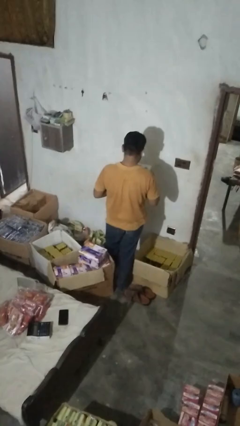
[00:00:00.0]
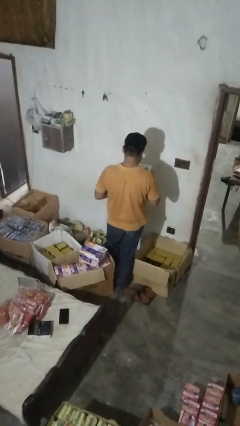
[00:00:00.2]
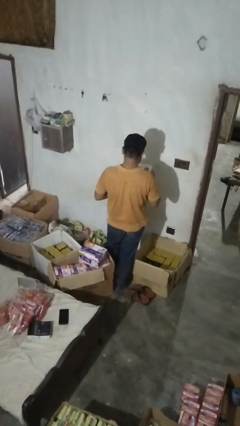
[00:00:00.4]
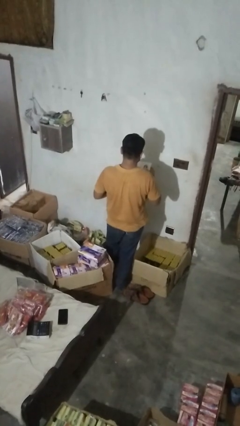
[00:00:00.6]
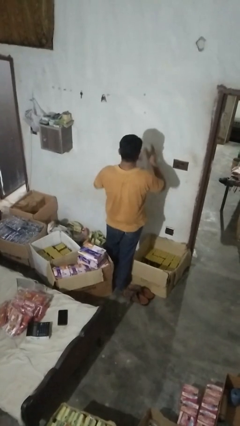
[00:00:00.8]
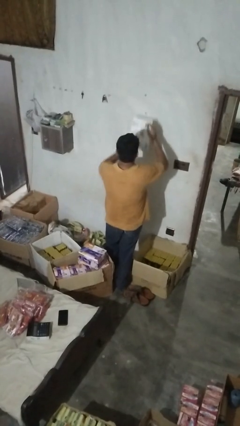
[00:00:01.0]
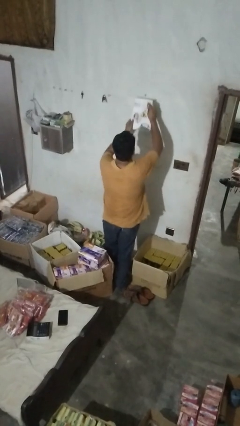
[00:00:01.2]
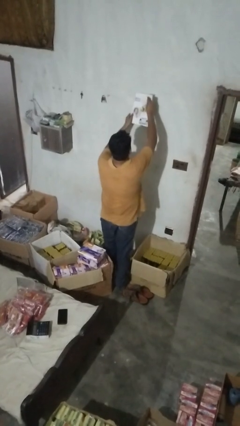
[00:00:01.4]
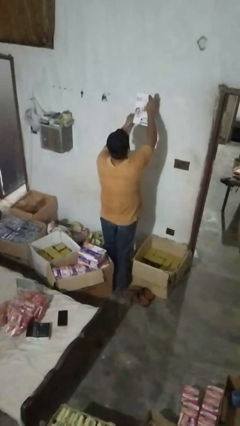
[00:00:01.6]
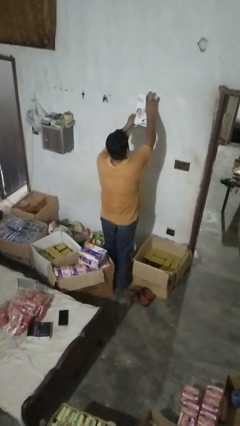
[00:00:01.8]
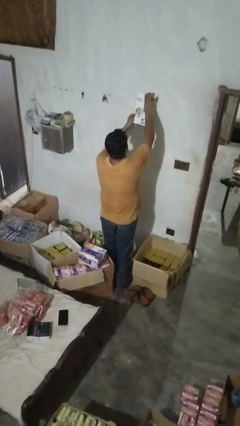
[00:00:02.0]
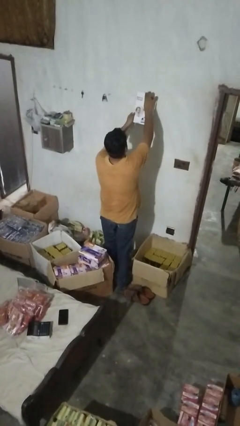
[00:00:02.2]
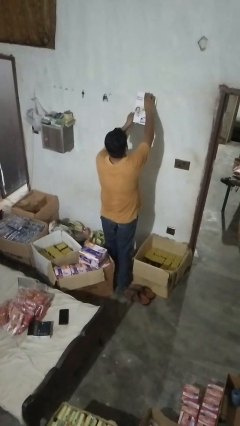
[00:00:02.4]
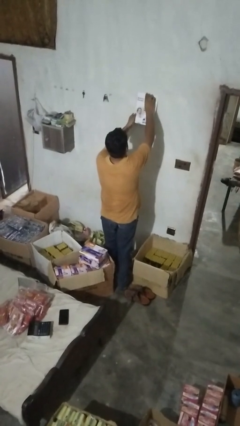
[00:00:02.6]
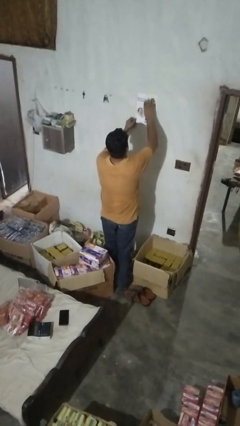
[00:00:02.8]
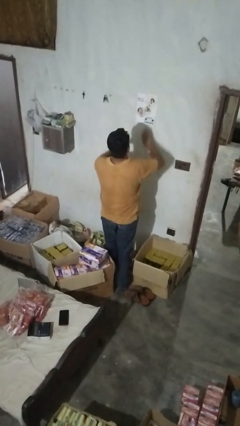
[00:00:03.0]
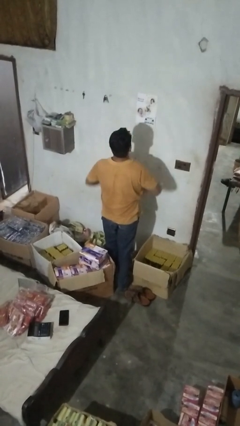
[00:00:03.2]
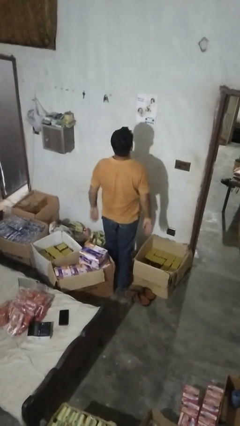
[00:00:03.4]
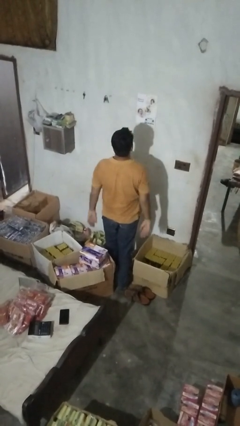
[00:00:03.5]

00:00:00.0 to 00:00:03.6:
person puts up picture frame

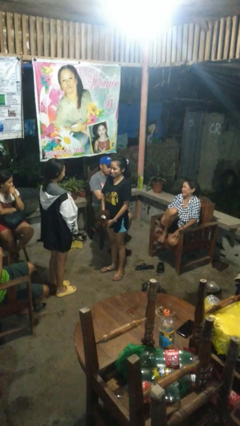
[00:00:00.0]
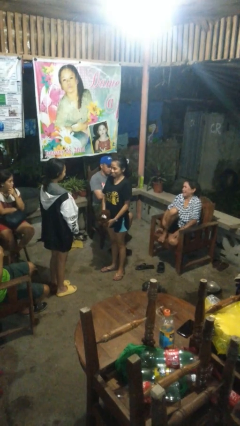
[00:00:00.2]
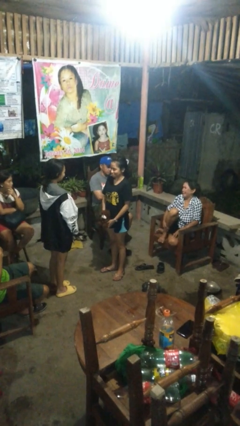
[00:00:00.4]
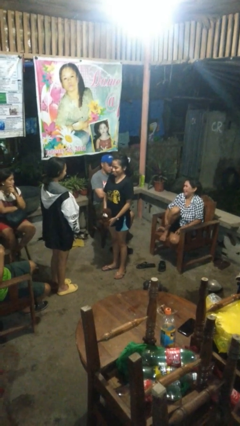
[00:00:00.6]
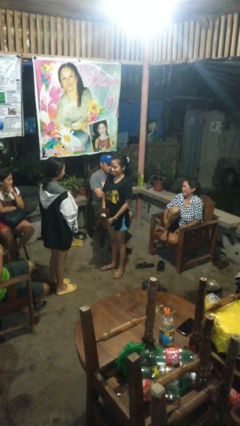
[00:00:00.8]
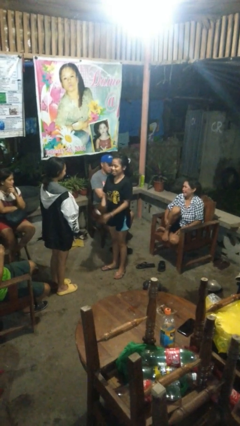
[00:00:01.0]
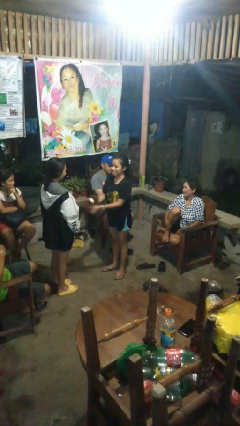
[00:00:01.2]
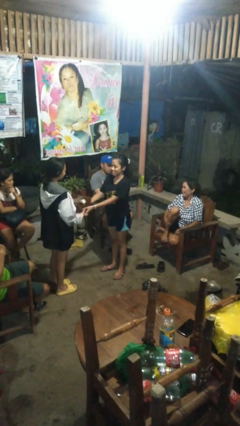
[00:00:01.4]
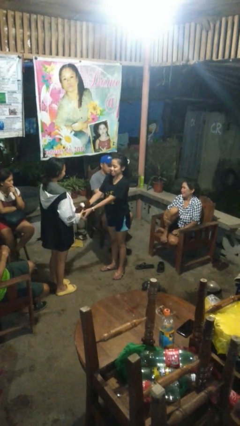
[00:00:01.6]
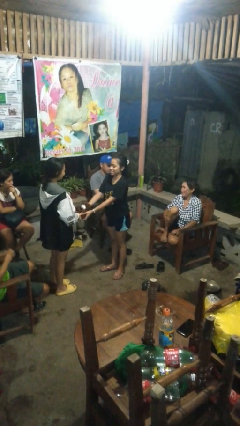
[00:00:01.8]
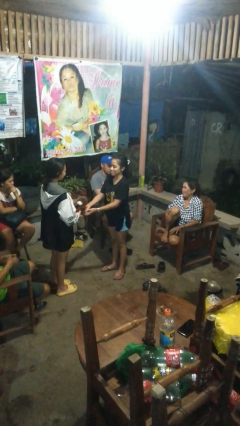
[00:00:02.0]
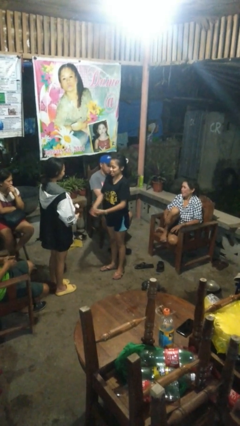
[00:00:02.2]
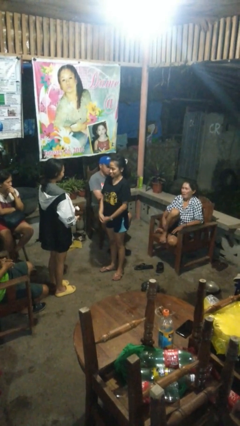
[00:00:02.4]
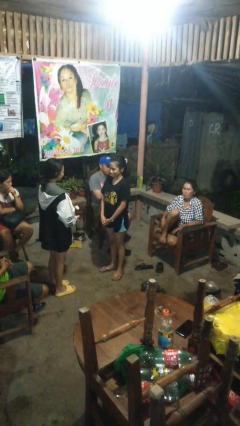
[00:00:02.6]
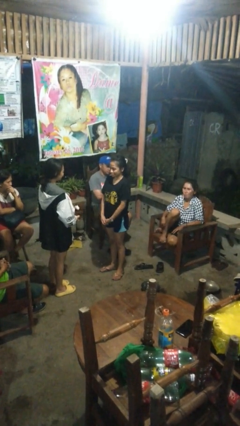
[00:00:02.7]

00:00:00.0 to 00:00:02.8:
person transfers object to person

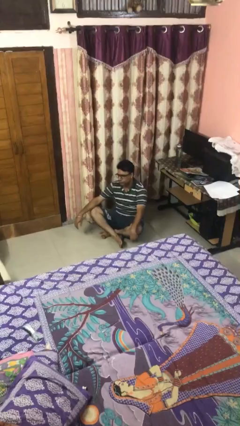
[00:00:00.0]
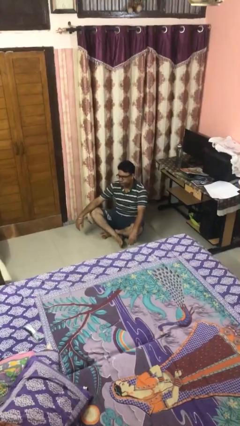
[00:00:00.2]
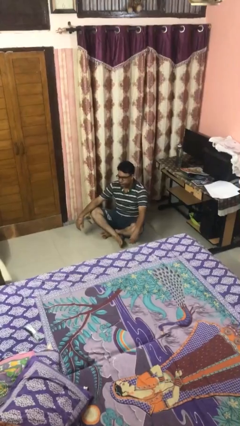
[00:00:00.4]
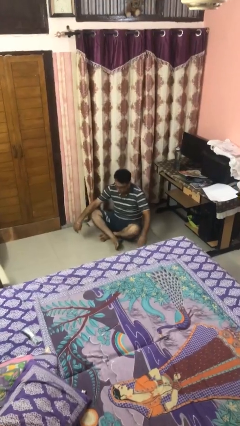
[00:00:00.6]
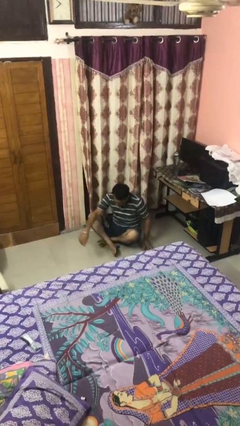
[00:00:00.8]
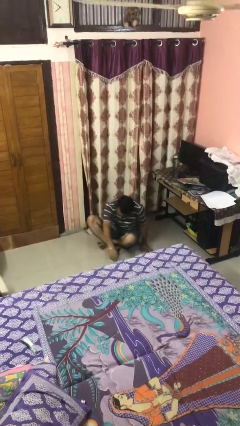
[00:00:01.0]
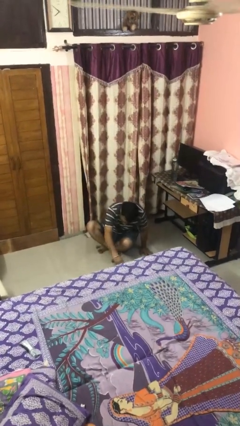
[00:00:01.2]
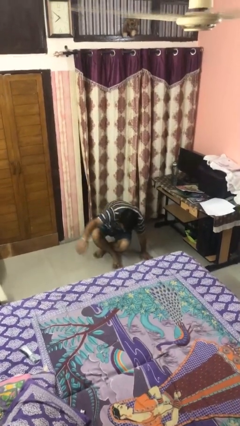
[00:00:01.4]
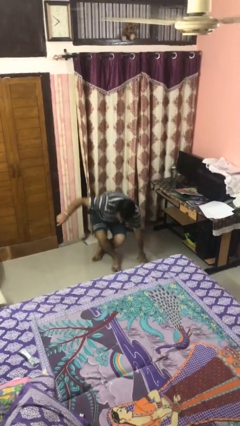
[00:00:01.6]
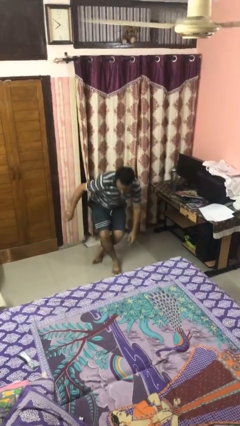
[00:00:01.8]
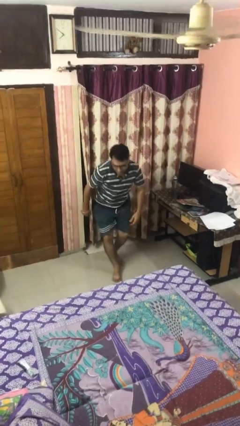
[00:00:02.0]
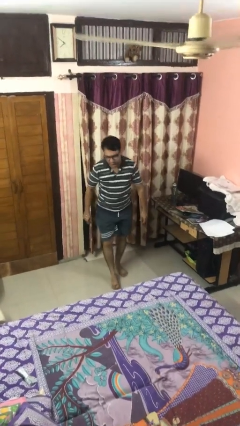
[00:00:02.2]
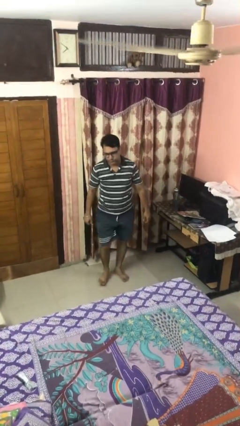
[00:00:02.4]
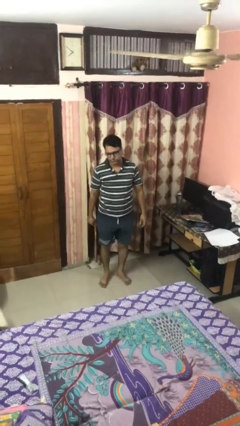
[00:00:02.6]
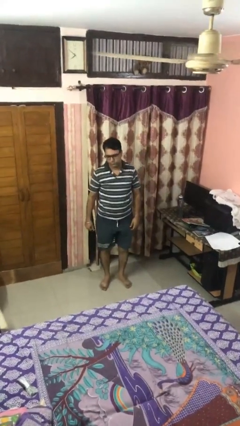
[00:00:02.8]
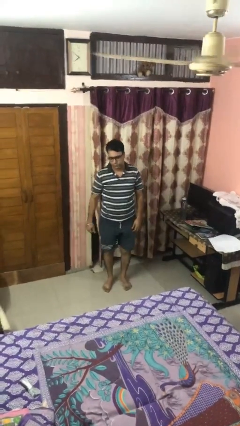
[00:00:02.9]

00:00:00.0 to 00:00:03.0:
person stands up from floor

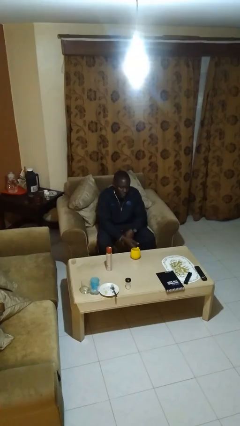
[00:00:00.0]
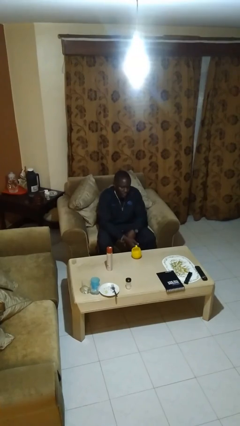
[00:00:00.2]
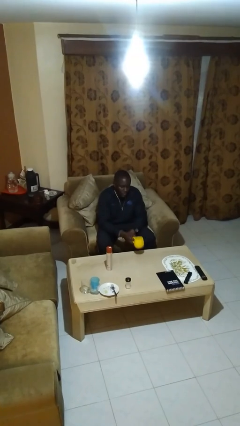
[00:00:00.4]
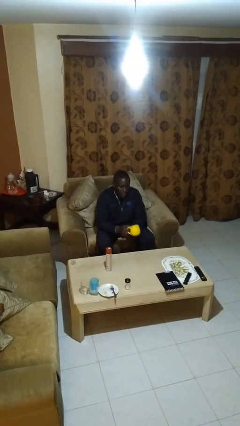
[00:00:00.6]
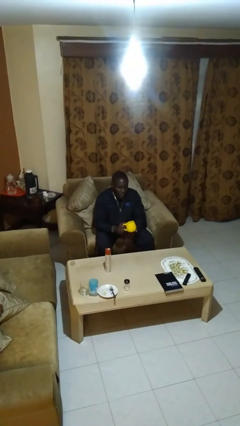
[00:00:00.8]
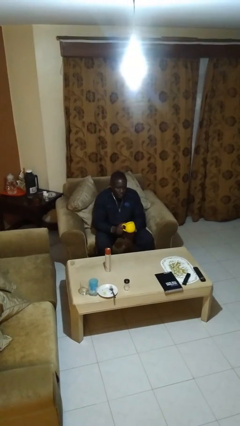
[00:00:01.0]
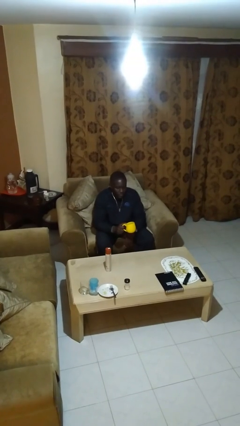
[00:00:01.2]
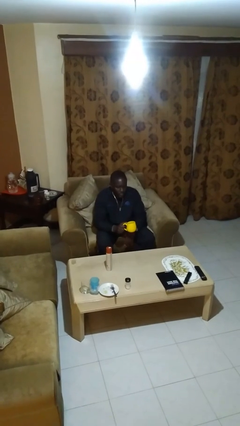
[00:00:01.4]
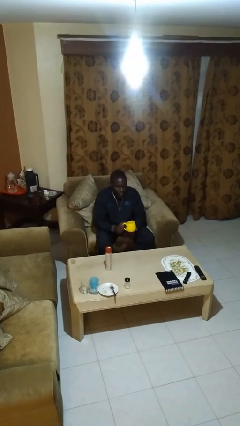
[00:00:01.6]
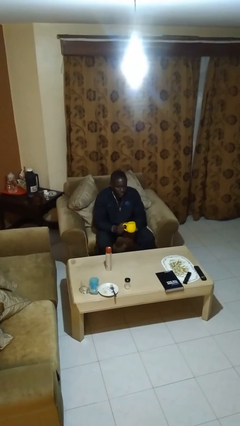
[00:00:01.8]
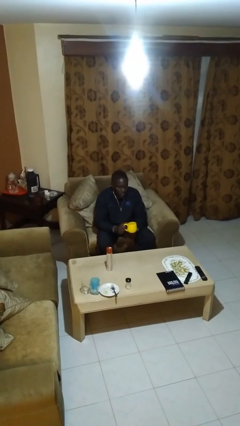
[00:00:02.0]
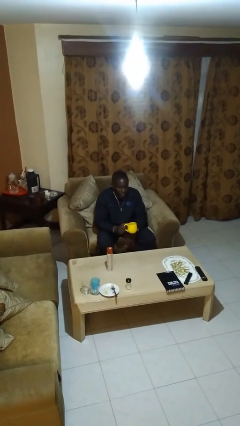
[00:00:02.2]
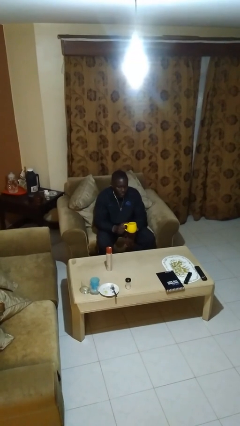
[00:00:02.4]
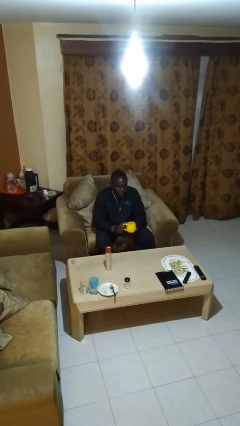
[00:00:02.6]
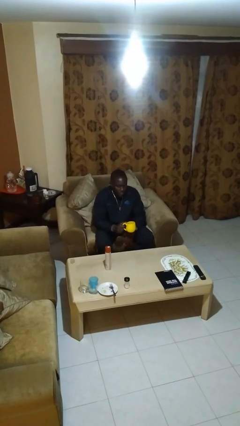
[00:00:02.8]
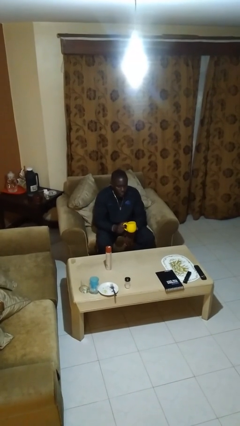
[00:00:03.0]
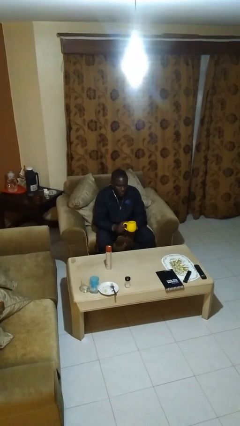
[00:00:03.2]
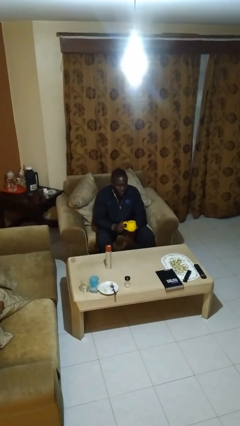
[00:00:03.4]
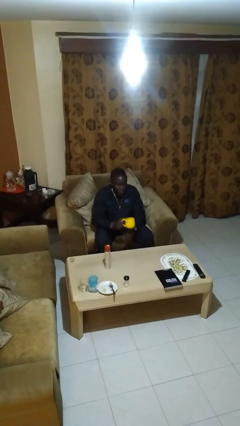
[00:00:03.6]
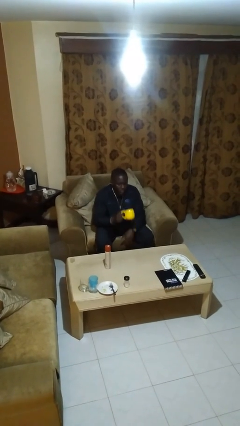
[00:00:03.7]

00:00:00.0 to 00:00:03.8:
person picks up object from table

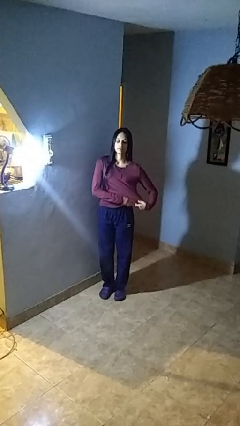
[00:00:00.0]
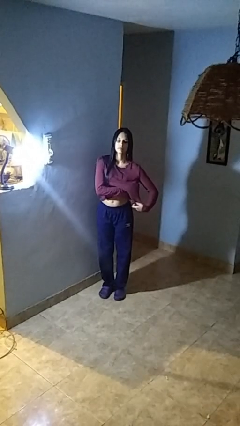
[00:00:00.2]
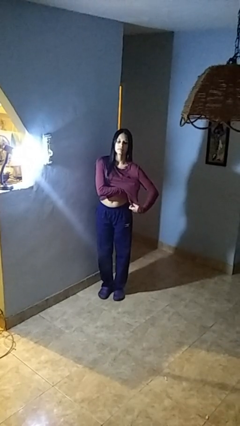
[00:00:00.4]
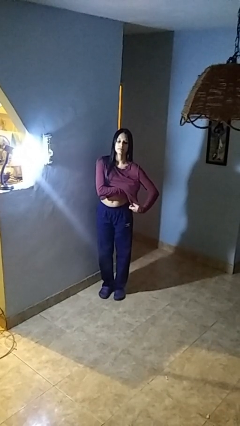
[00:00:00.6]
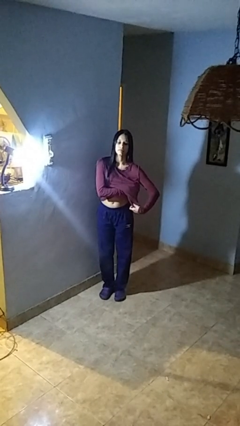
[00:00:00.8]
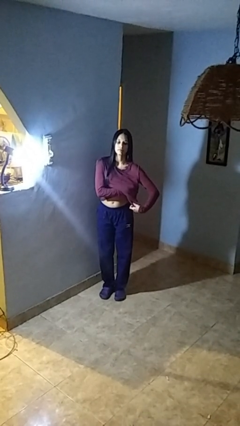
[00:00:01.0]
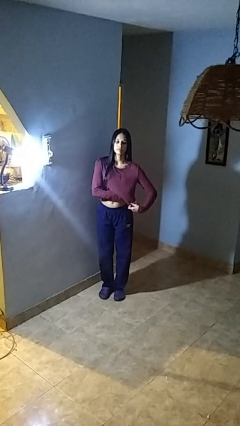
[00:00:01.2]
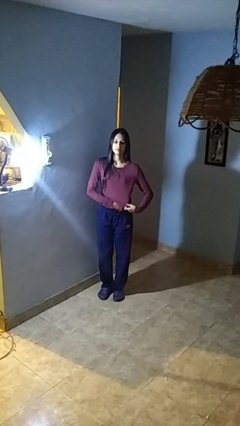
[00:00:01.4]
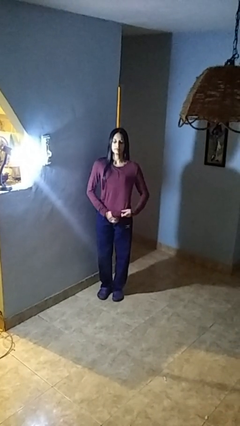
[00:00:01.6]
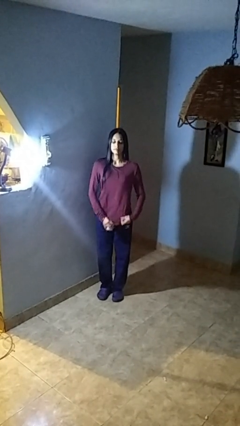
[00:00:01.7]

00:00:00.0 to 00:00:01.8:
person applies deodorant

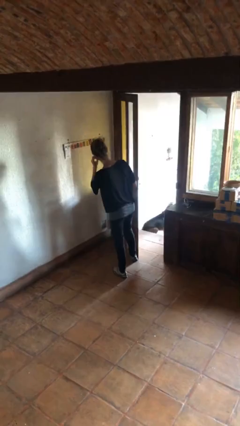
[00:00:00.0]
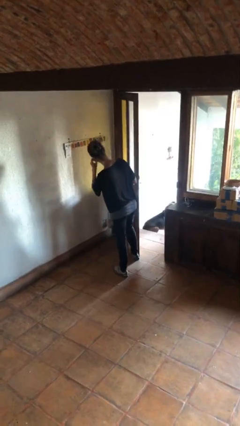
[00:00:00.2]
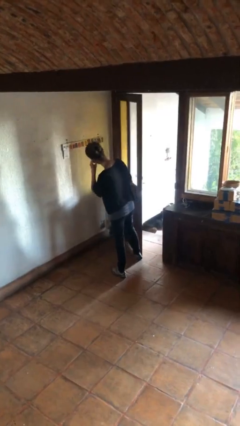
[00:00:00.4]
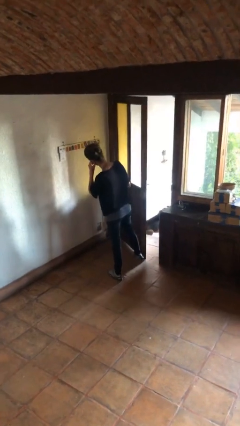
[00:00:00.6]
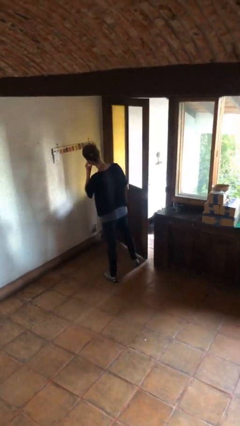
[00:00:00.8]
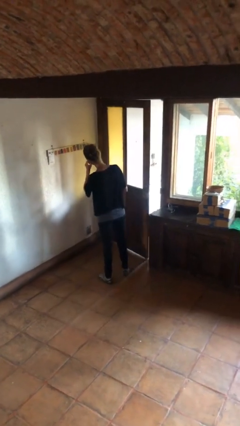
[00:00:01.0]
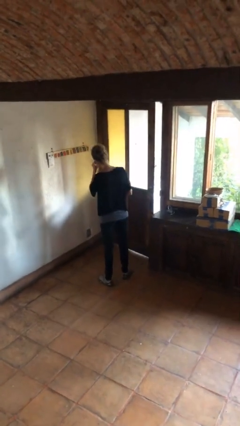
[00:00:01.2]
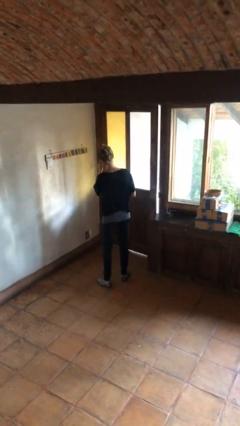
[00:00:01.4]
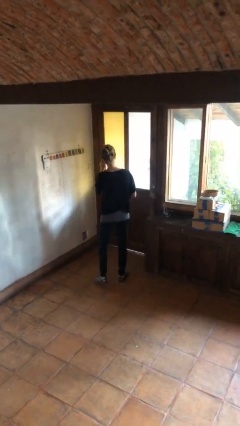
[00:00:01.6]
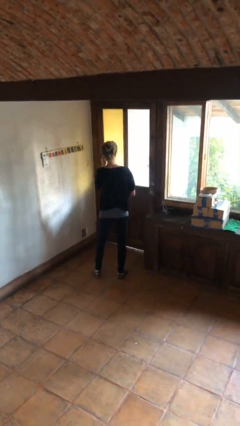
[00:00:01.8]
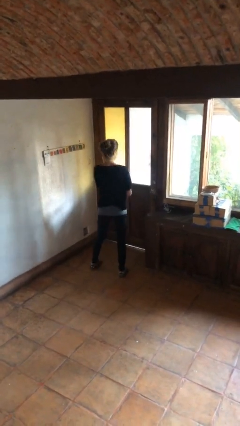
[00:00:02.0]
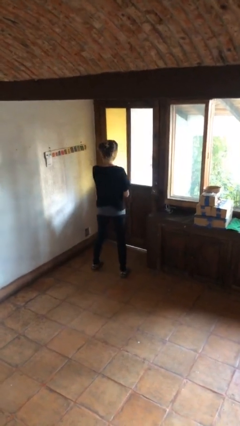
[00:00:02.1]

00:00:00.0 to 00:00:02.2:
person closes door with foot
